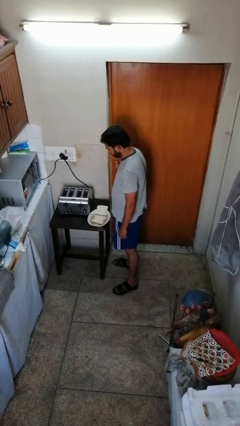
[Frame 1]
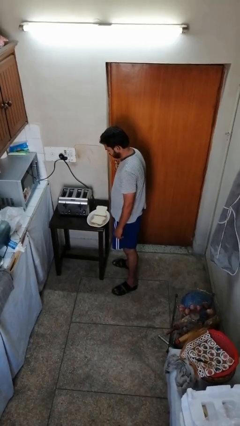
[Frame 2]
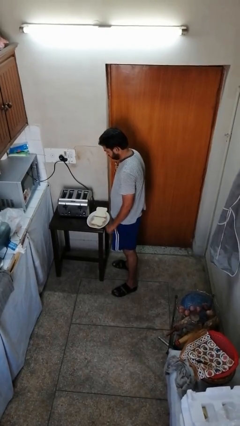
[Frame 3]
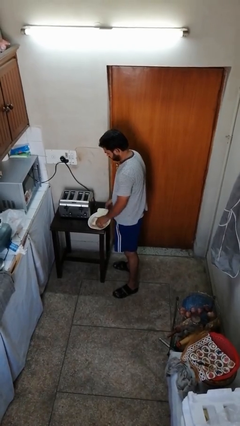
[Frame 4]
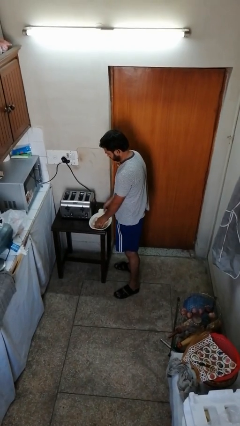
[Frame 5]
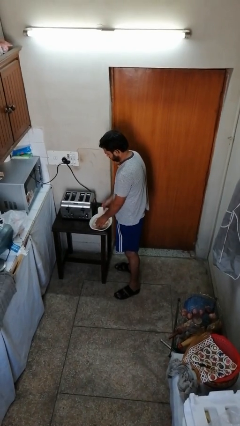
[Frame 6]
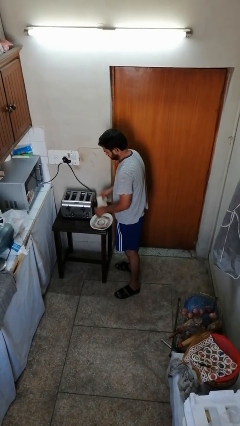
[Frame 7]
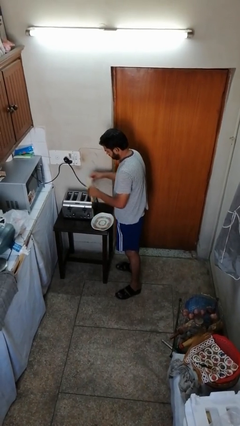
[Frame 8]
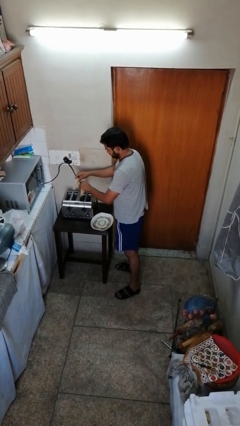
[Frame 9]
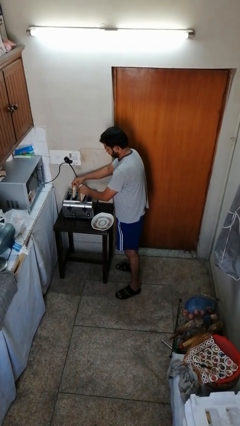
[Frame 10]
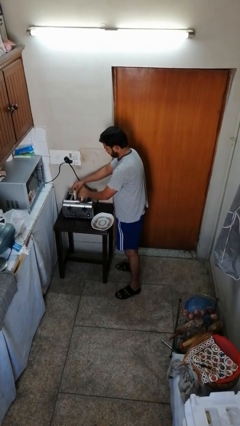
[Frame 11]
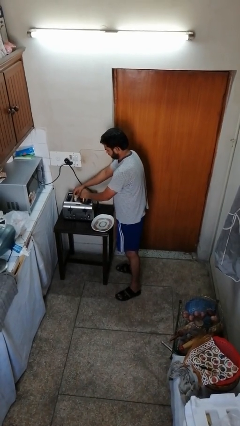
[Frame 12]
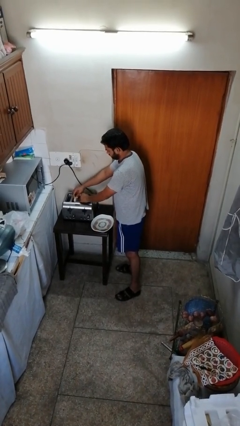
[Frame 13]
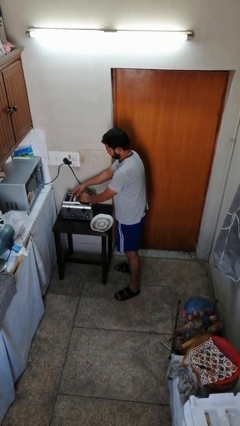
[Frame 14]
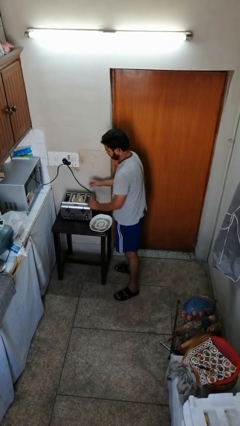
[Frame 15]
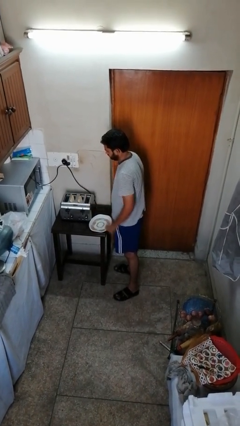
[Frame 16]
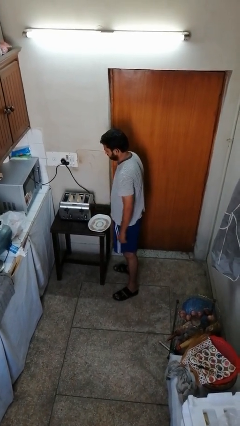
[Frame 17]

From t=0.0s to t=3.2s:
person puts object into toaster

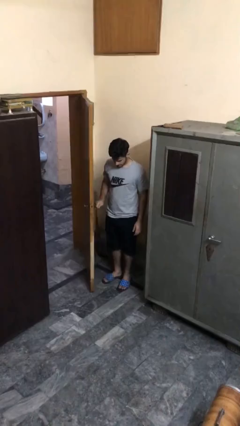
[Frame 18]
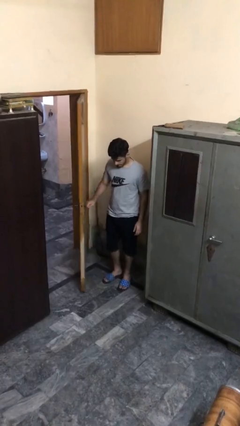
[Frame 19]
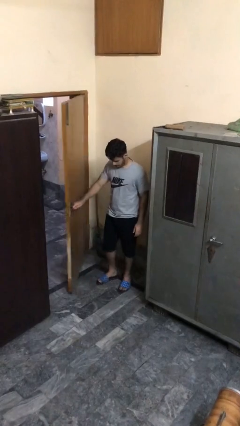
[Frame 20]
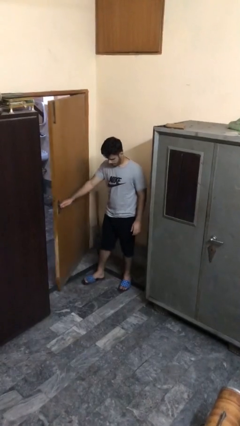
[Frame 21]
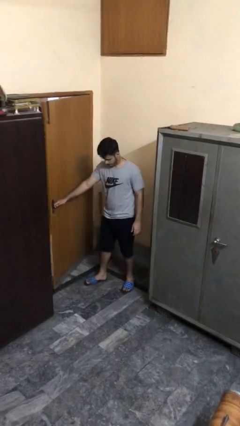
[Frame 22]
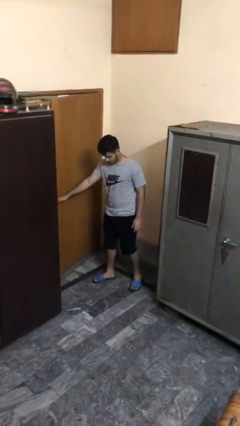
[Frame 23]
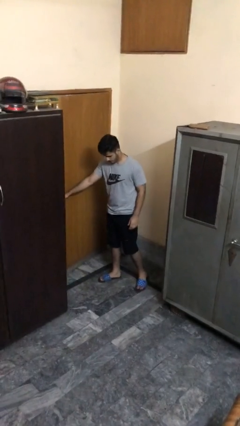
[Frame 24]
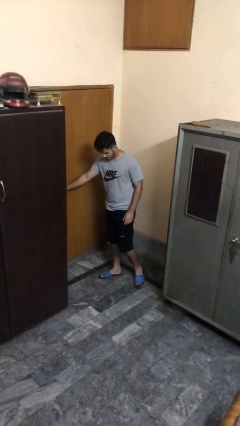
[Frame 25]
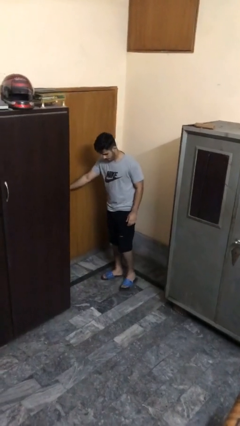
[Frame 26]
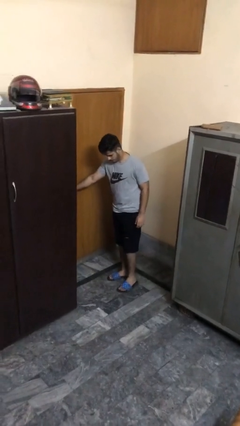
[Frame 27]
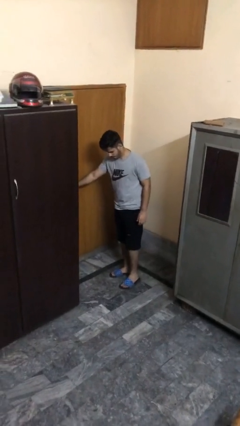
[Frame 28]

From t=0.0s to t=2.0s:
person closes facility door

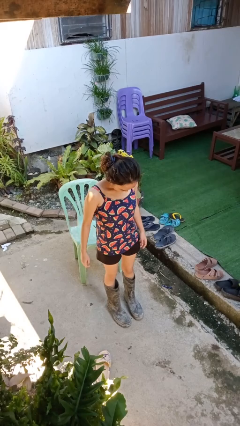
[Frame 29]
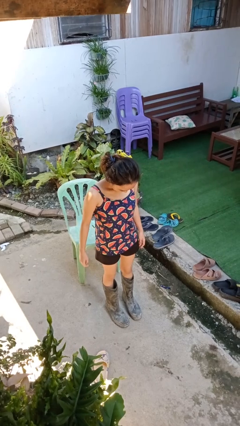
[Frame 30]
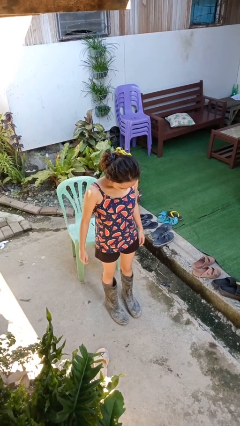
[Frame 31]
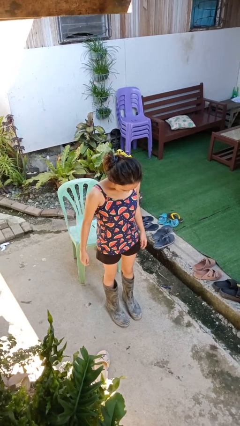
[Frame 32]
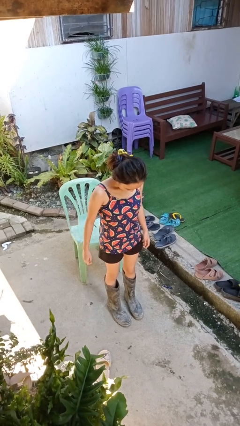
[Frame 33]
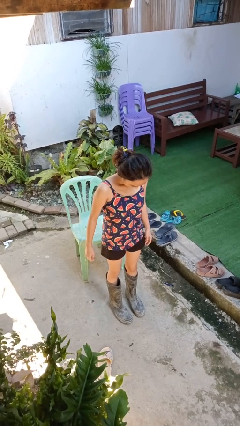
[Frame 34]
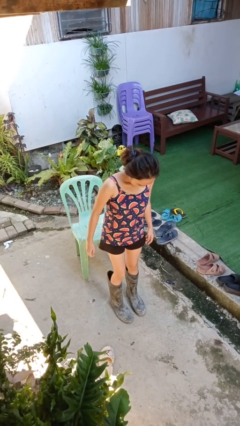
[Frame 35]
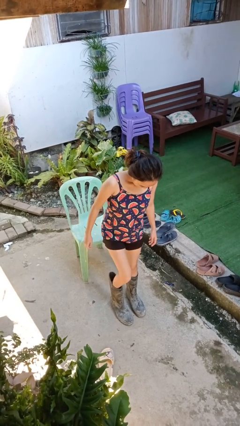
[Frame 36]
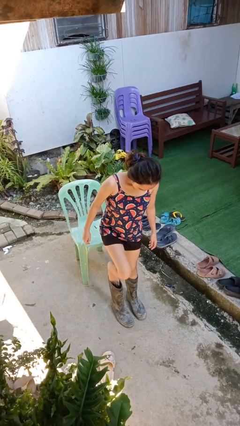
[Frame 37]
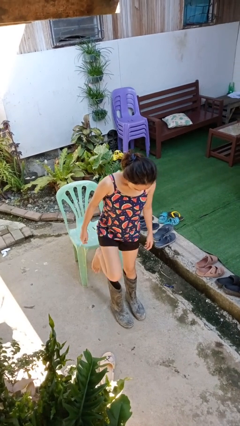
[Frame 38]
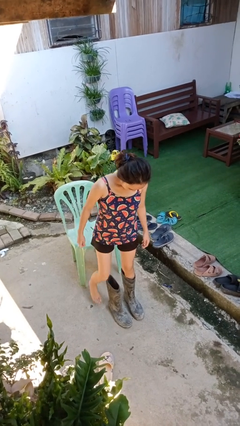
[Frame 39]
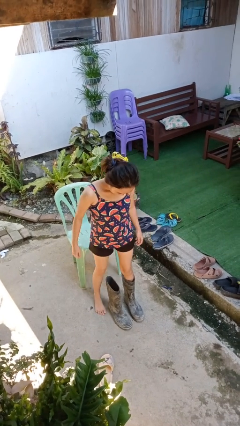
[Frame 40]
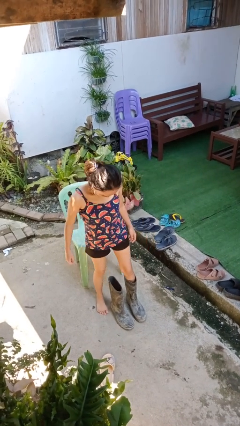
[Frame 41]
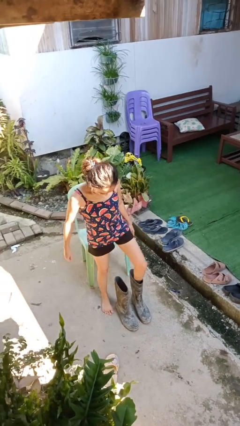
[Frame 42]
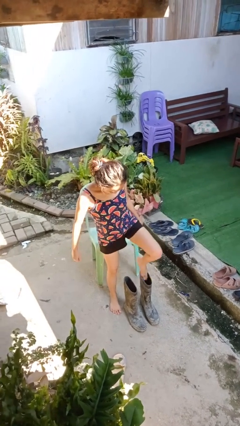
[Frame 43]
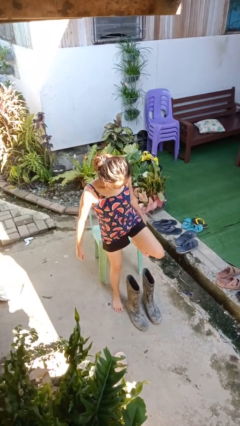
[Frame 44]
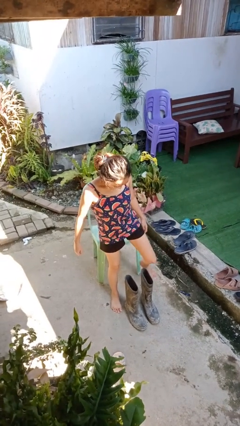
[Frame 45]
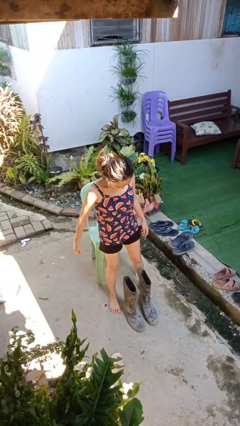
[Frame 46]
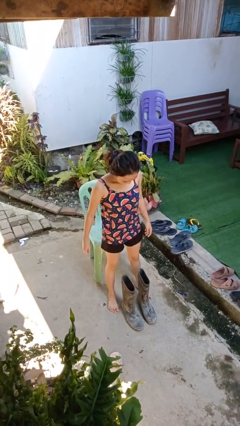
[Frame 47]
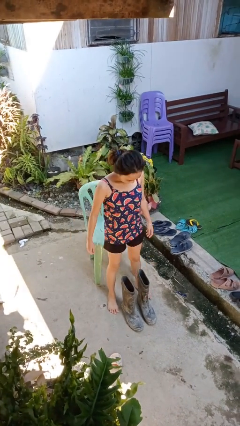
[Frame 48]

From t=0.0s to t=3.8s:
person takes off boots

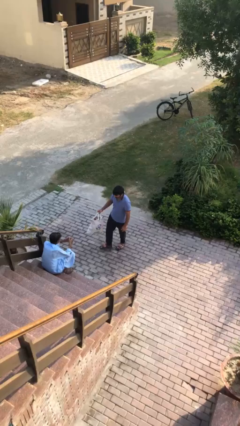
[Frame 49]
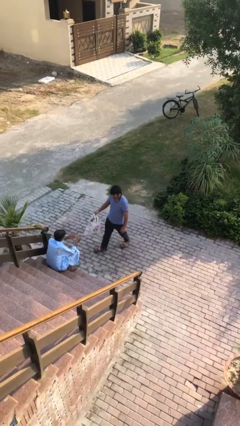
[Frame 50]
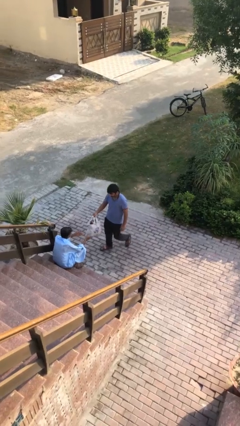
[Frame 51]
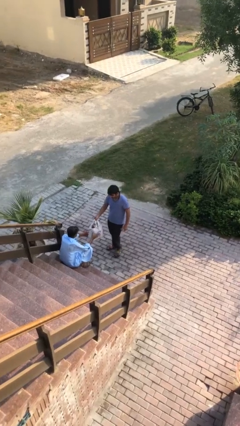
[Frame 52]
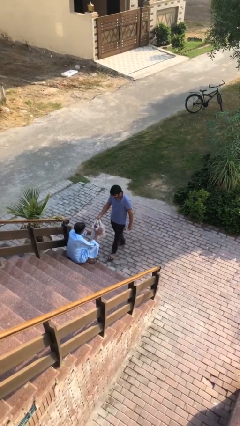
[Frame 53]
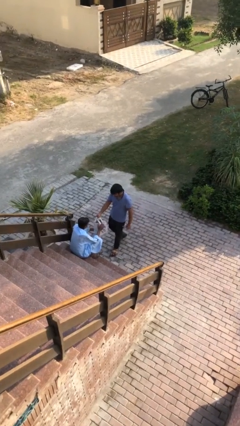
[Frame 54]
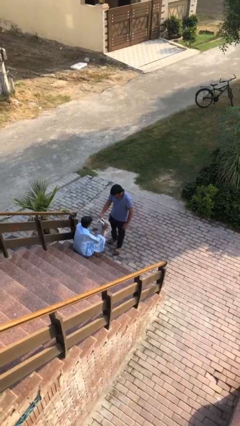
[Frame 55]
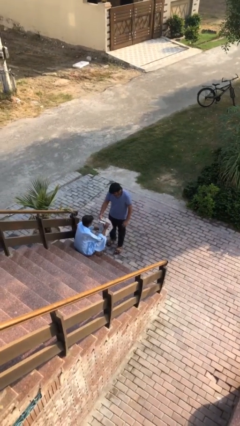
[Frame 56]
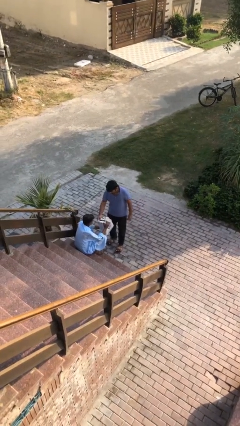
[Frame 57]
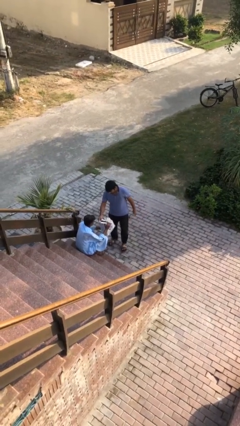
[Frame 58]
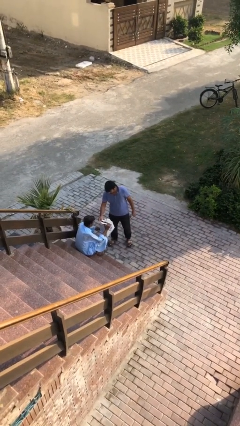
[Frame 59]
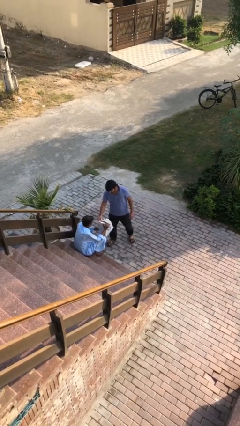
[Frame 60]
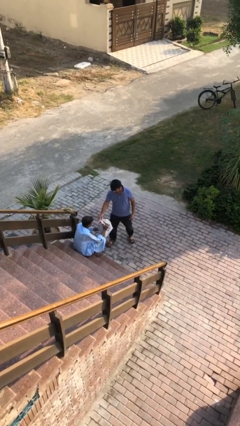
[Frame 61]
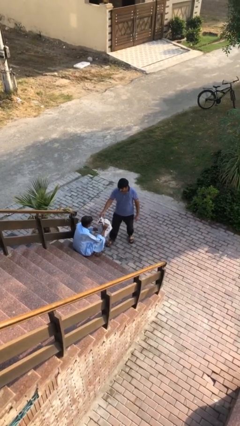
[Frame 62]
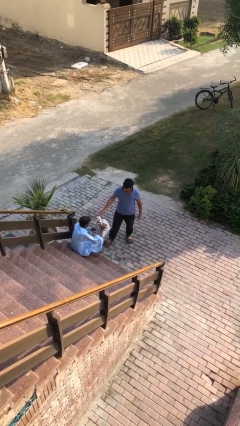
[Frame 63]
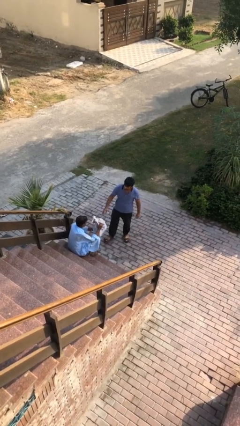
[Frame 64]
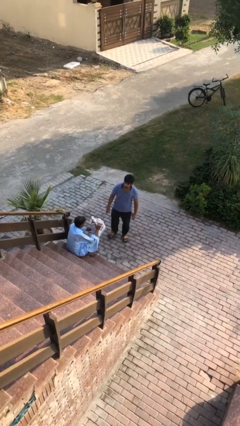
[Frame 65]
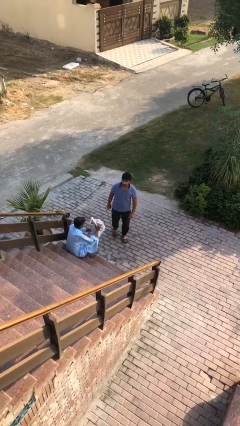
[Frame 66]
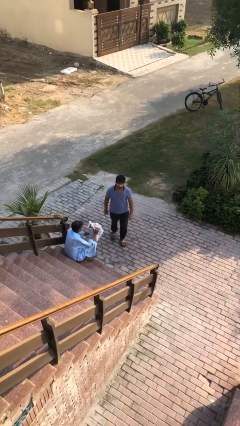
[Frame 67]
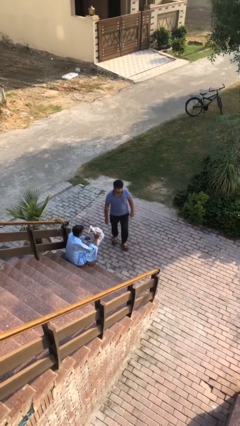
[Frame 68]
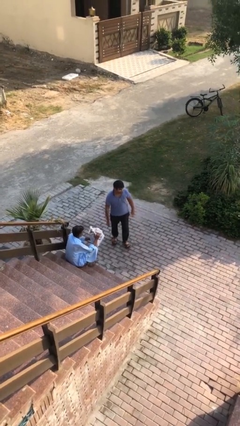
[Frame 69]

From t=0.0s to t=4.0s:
person transfers object to person

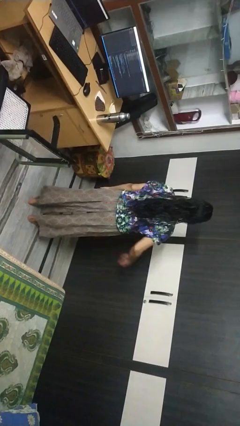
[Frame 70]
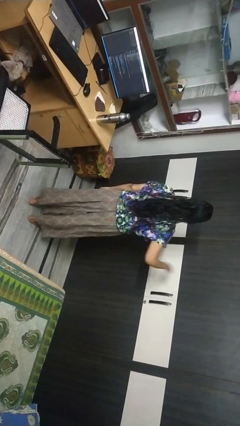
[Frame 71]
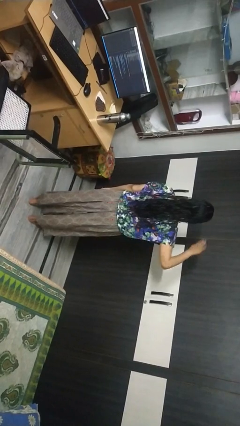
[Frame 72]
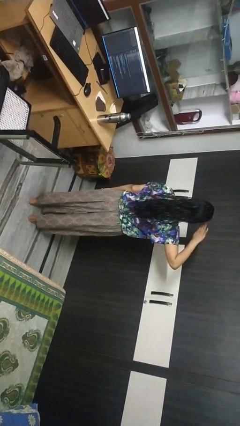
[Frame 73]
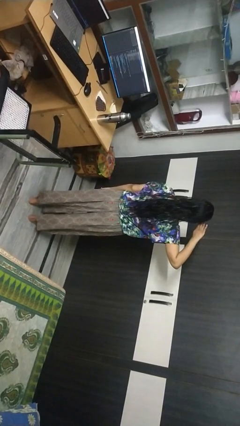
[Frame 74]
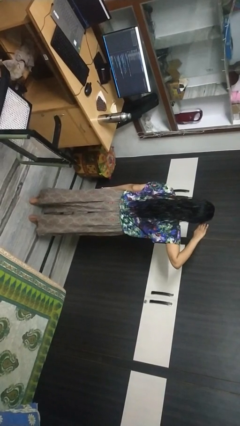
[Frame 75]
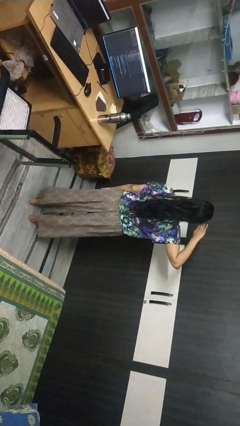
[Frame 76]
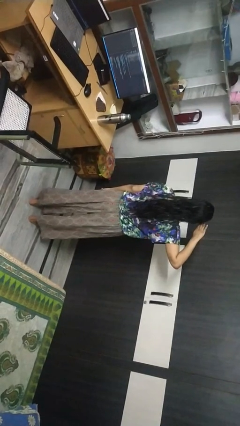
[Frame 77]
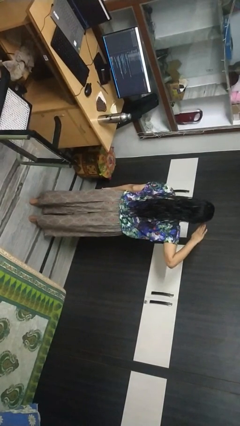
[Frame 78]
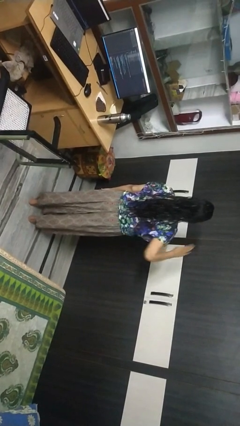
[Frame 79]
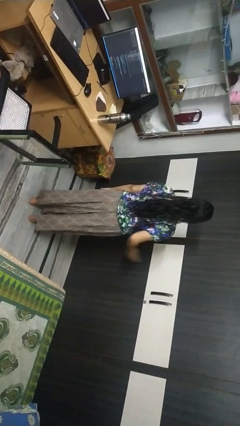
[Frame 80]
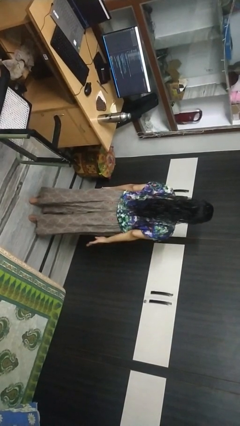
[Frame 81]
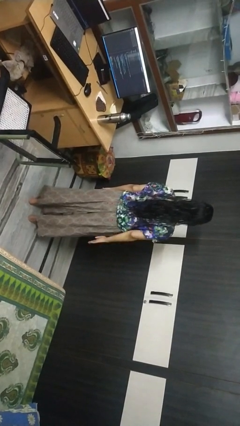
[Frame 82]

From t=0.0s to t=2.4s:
person salutes

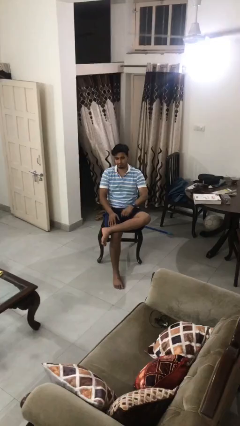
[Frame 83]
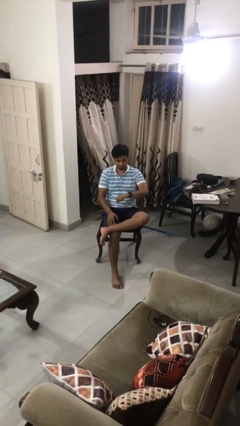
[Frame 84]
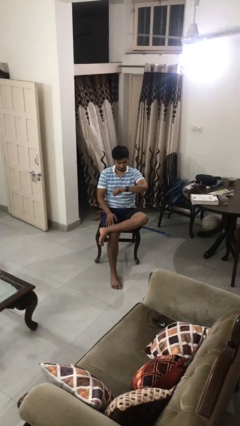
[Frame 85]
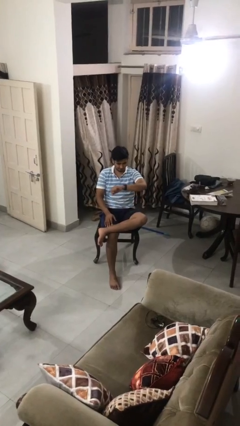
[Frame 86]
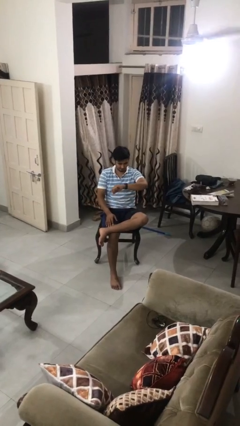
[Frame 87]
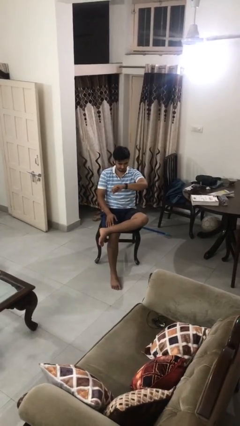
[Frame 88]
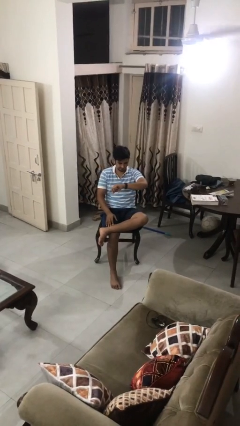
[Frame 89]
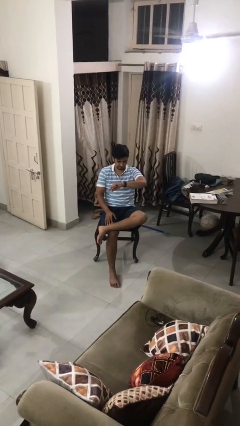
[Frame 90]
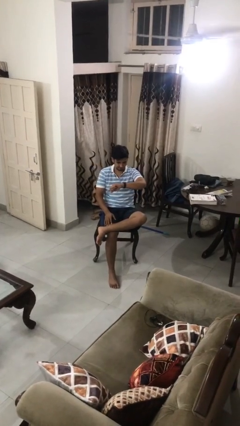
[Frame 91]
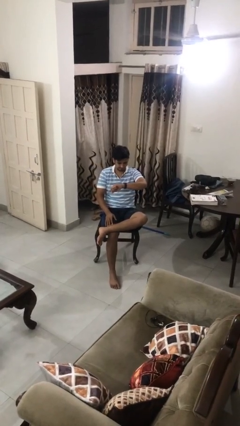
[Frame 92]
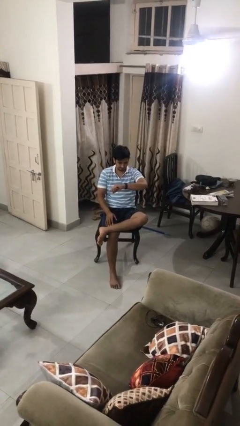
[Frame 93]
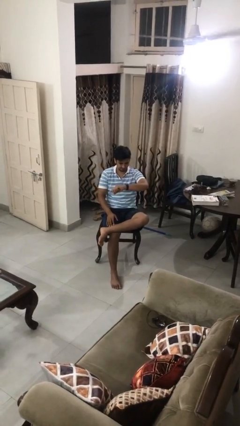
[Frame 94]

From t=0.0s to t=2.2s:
person looks at wristwatch
